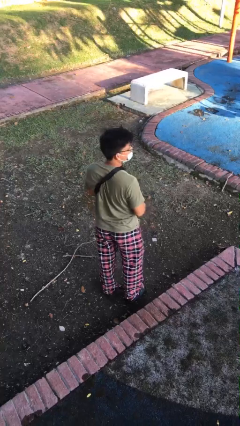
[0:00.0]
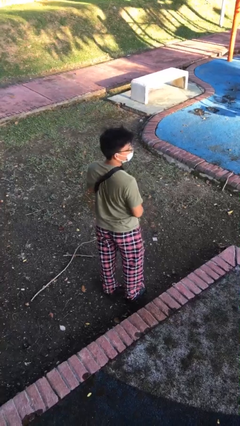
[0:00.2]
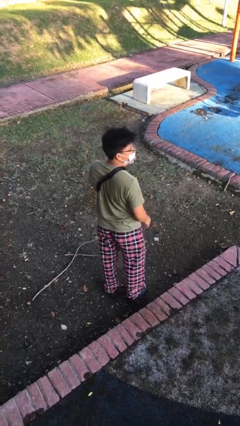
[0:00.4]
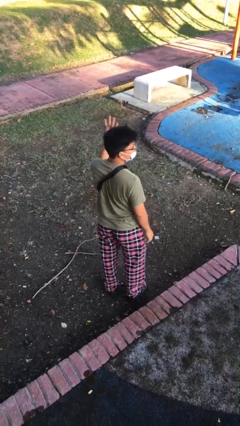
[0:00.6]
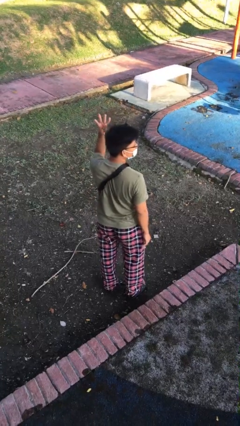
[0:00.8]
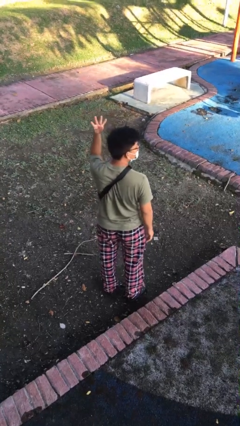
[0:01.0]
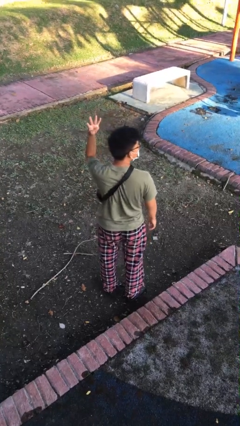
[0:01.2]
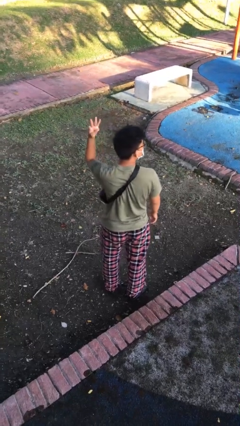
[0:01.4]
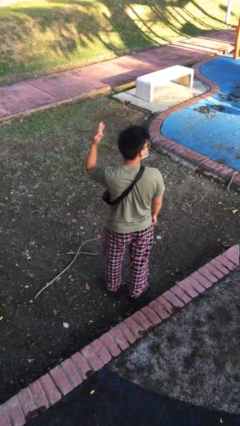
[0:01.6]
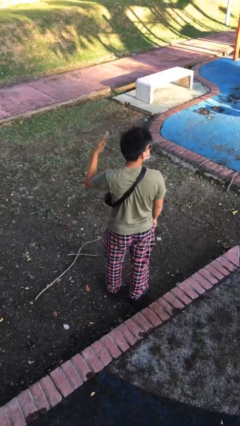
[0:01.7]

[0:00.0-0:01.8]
person gestures number four

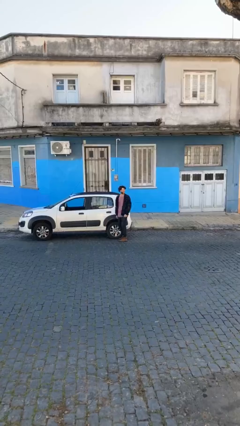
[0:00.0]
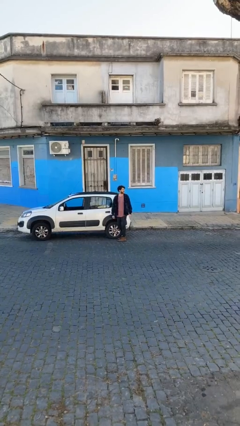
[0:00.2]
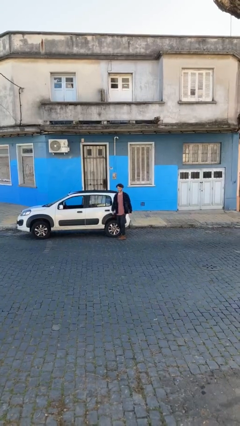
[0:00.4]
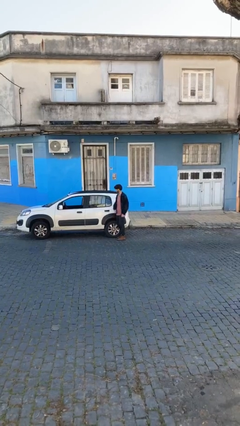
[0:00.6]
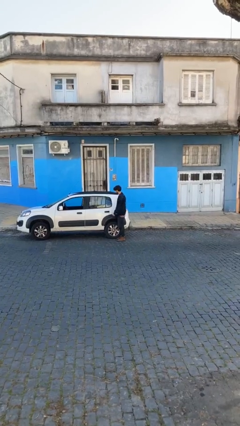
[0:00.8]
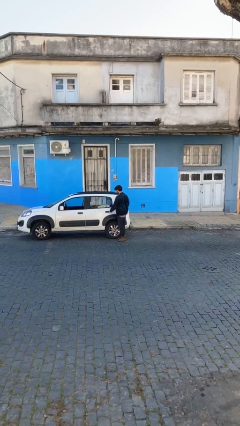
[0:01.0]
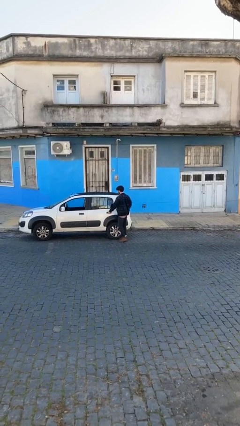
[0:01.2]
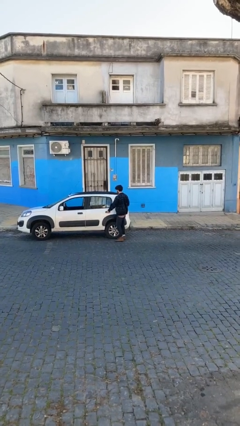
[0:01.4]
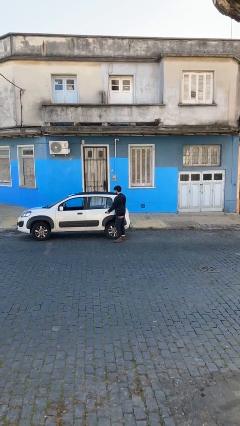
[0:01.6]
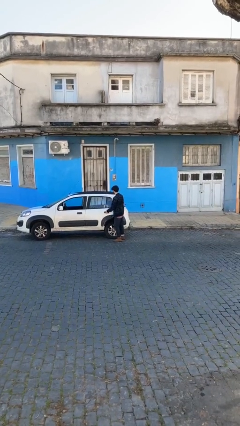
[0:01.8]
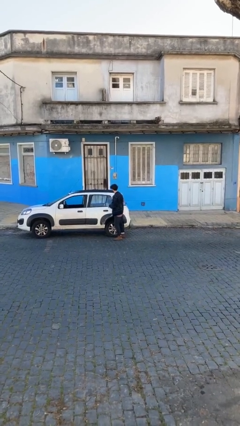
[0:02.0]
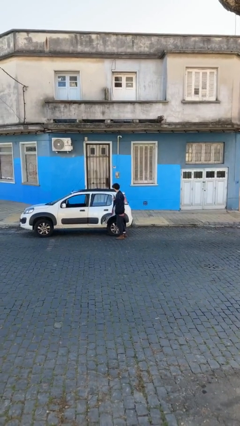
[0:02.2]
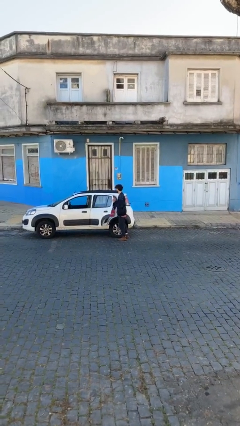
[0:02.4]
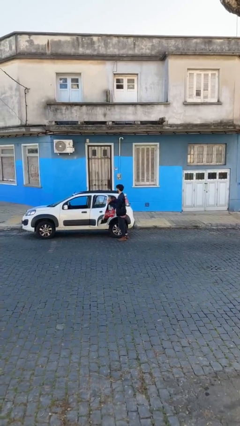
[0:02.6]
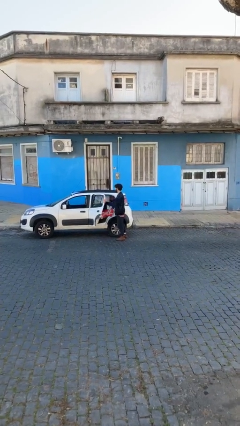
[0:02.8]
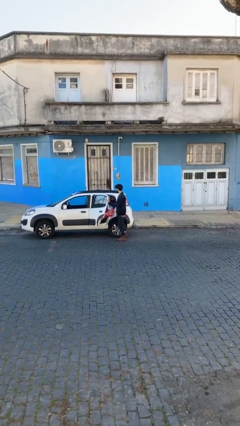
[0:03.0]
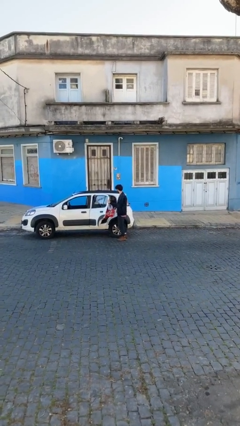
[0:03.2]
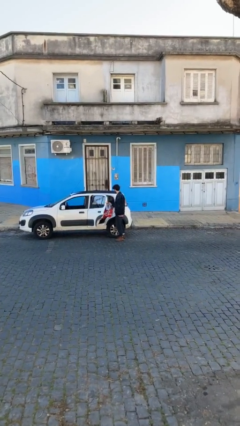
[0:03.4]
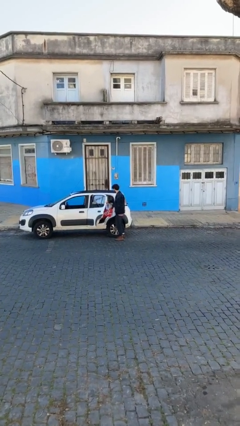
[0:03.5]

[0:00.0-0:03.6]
person opens car door

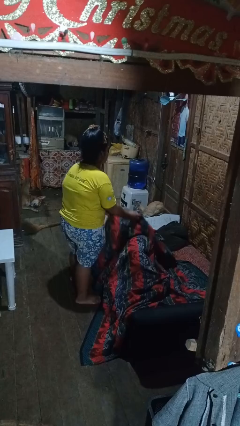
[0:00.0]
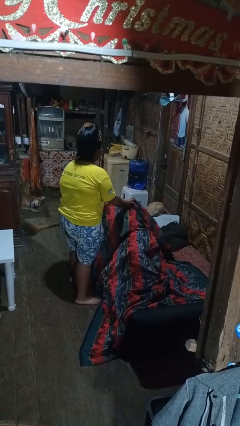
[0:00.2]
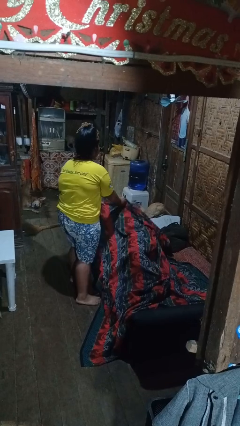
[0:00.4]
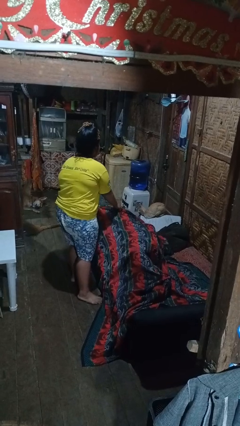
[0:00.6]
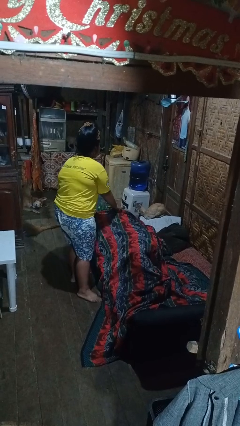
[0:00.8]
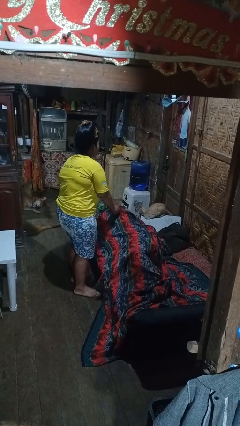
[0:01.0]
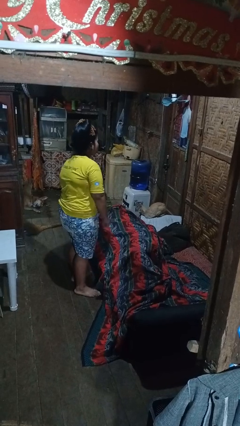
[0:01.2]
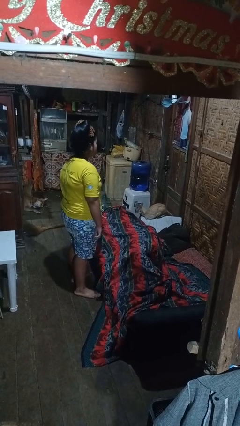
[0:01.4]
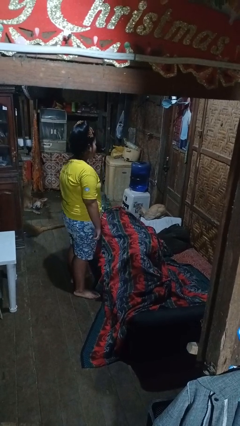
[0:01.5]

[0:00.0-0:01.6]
person covers friend with blanket

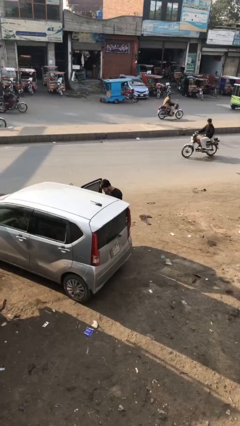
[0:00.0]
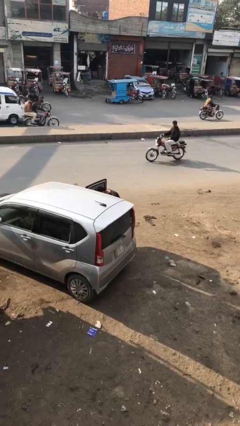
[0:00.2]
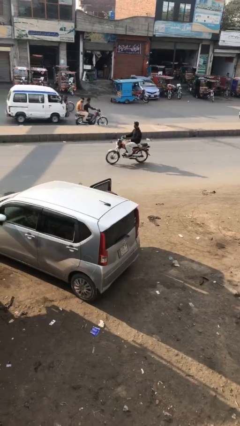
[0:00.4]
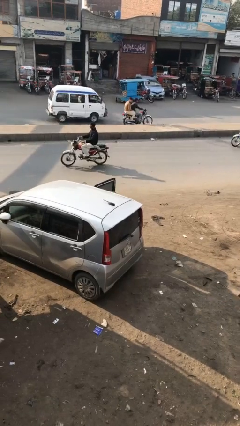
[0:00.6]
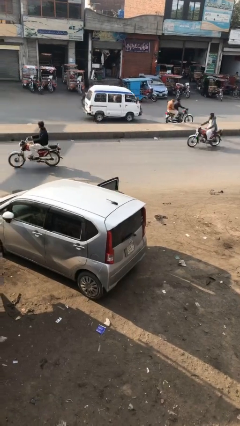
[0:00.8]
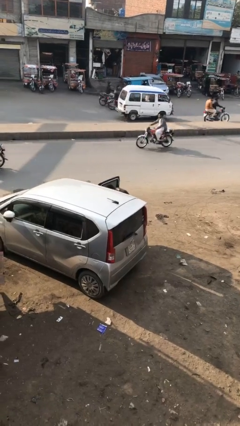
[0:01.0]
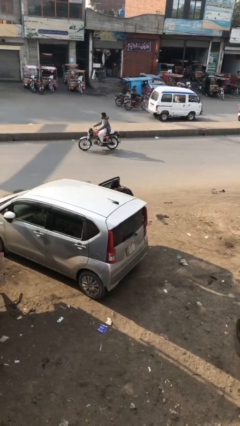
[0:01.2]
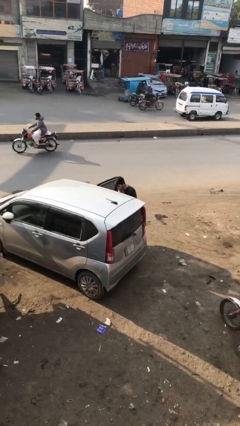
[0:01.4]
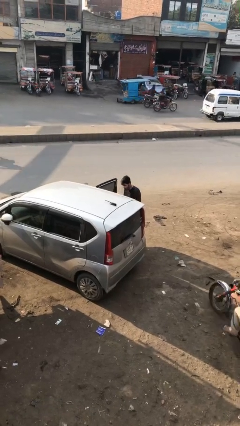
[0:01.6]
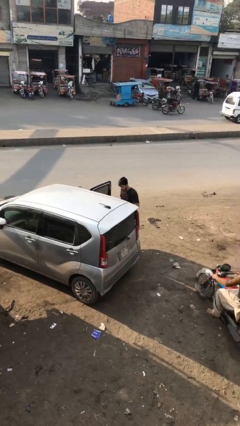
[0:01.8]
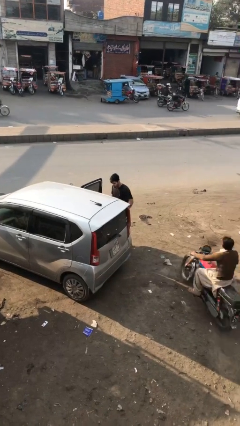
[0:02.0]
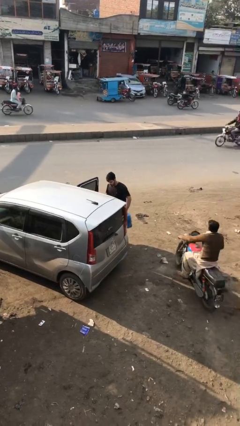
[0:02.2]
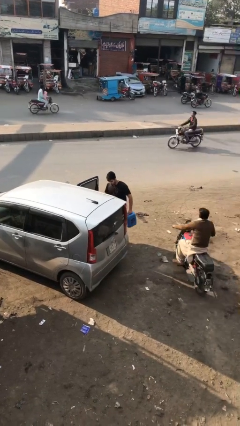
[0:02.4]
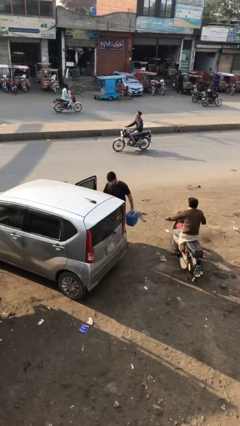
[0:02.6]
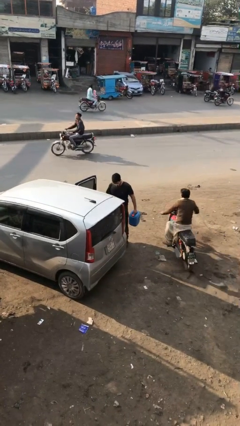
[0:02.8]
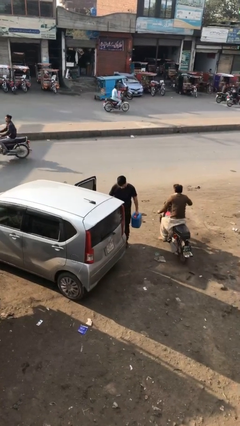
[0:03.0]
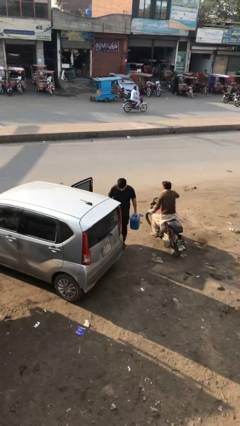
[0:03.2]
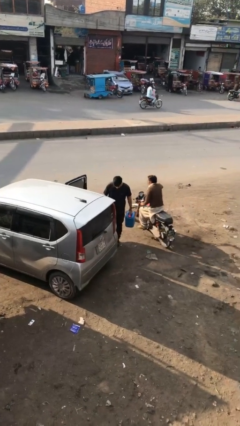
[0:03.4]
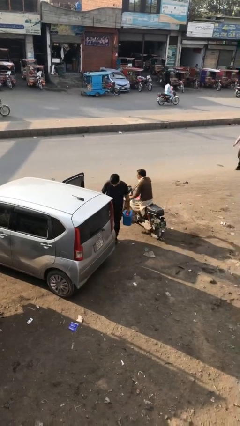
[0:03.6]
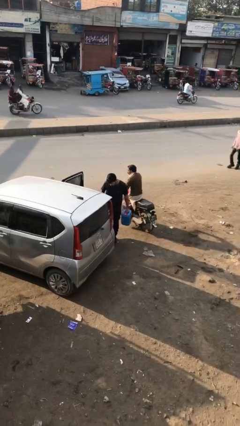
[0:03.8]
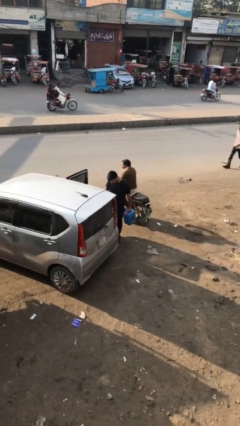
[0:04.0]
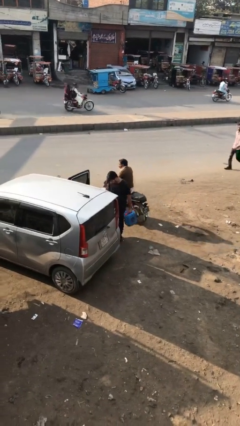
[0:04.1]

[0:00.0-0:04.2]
person unloads car

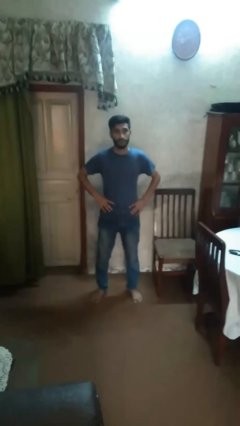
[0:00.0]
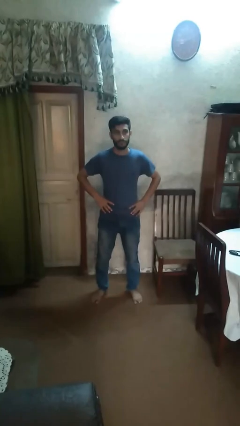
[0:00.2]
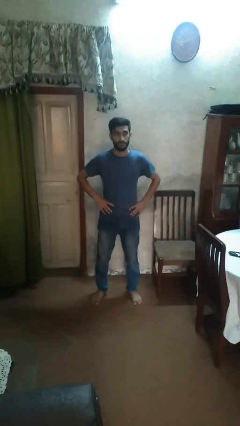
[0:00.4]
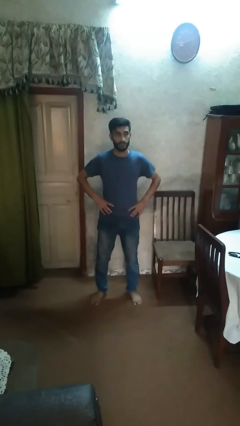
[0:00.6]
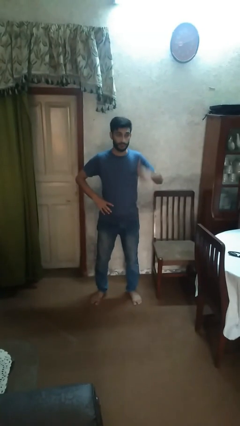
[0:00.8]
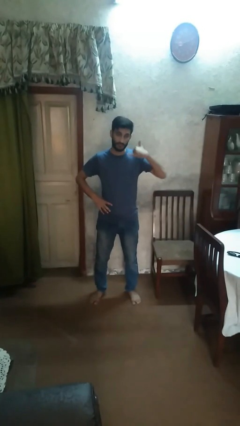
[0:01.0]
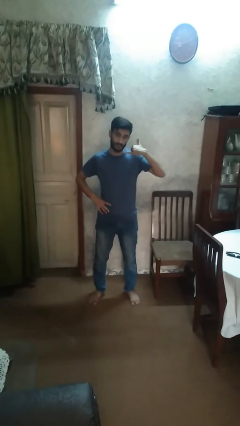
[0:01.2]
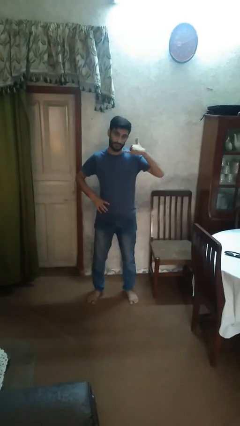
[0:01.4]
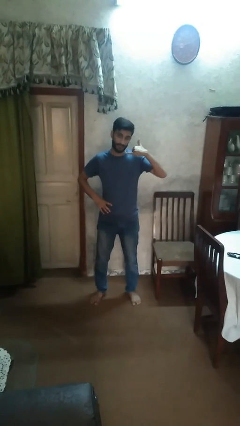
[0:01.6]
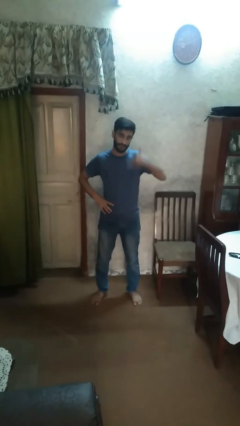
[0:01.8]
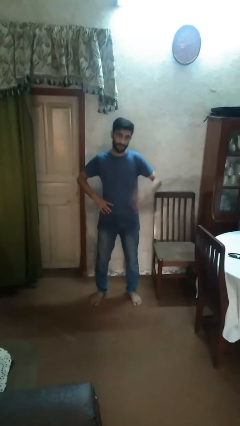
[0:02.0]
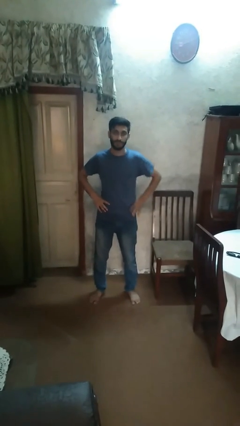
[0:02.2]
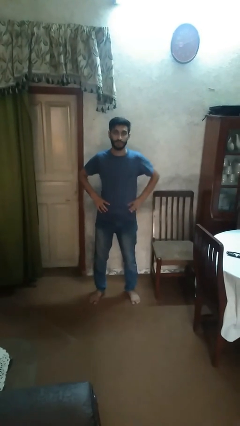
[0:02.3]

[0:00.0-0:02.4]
person gestures call me

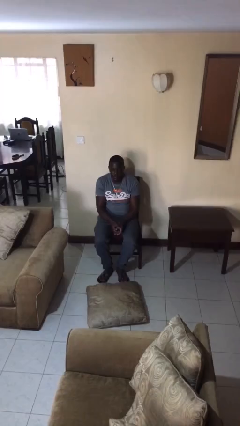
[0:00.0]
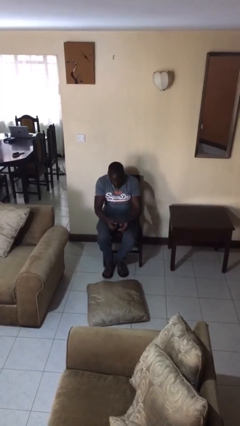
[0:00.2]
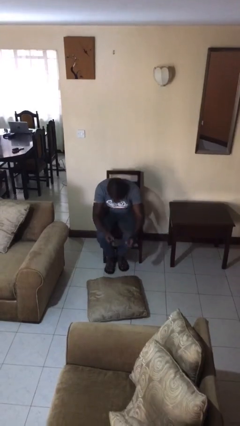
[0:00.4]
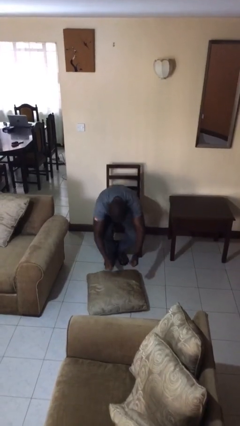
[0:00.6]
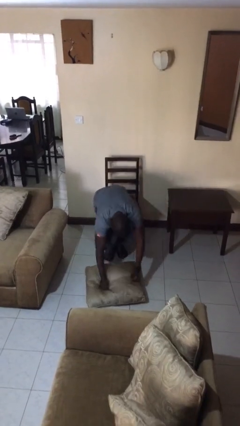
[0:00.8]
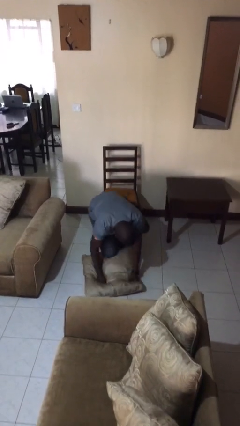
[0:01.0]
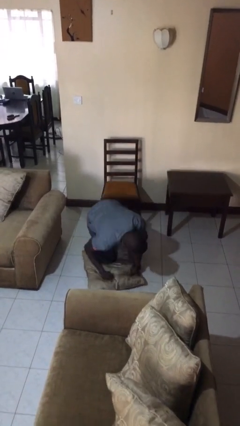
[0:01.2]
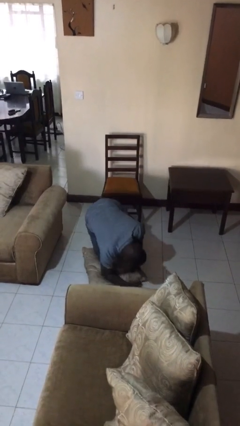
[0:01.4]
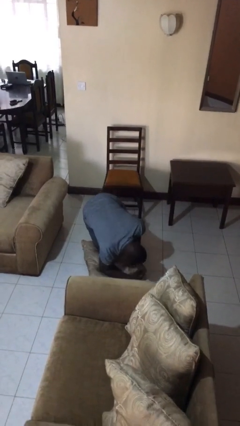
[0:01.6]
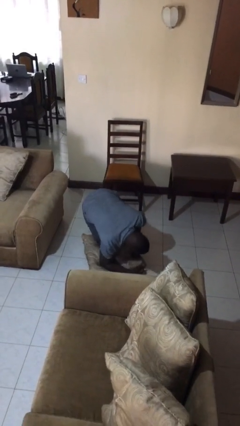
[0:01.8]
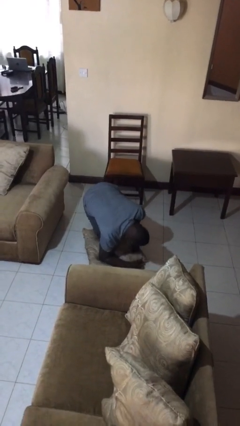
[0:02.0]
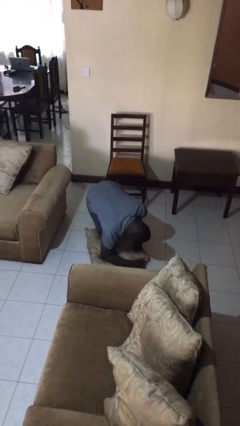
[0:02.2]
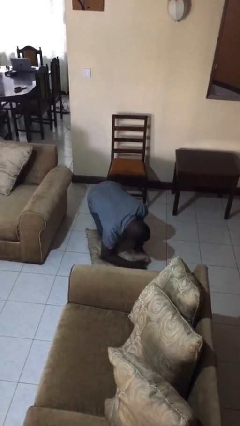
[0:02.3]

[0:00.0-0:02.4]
person falls from chair

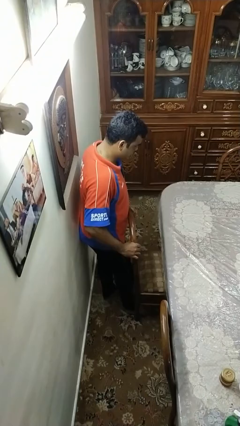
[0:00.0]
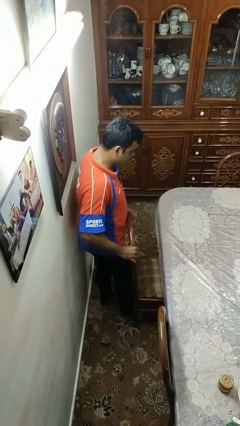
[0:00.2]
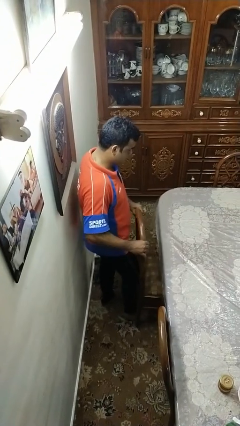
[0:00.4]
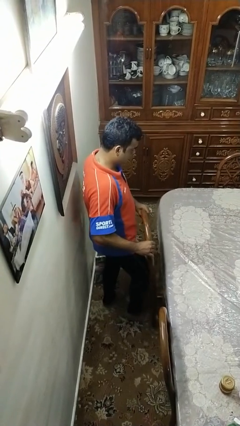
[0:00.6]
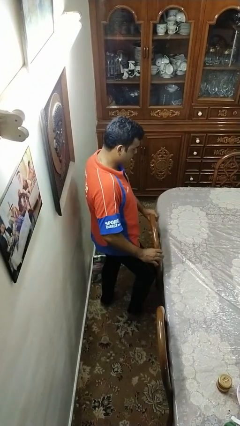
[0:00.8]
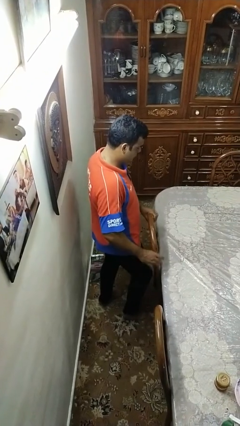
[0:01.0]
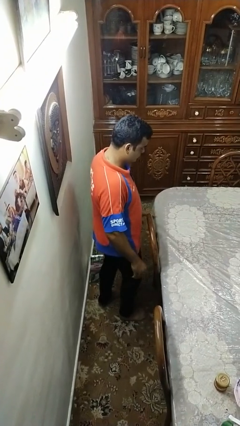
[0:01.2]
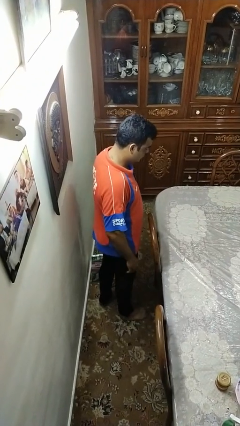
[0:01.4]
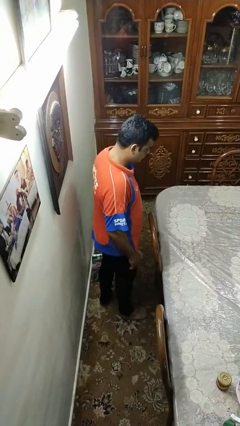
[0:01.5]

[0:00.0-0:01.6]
person pushes in chair
